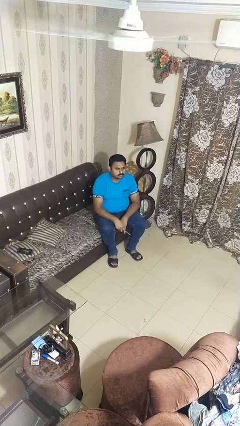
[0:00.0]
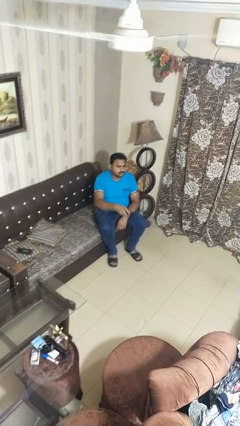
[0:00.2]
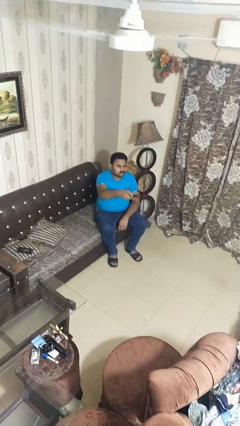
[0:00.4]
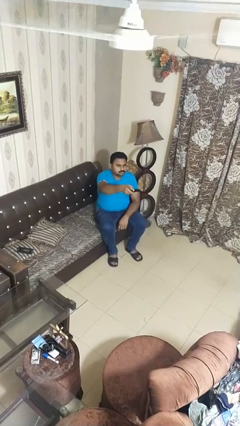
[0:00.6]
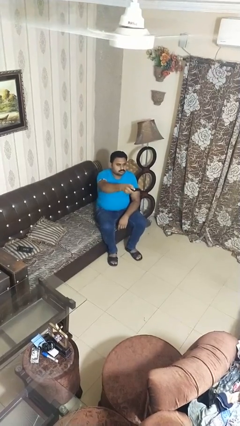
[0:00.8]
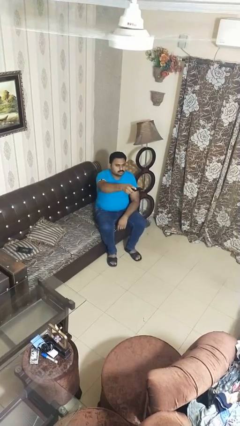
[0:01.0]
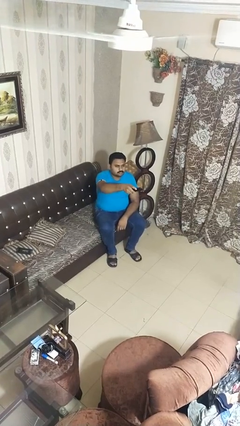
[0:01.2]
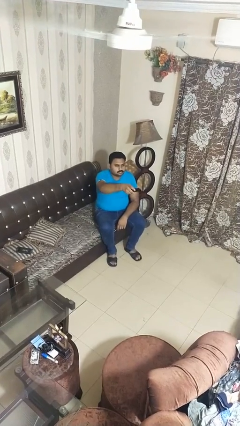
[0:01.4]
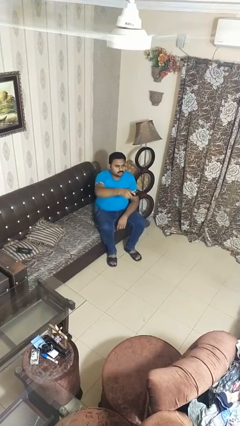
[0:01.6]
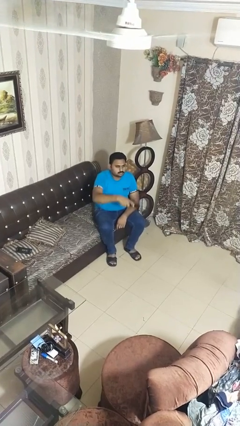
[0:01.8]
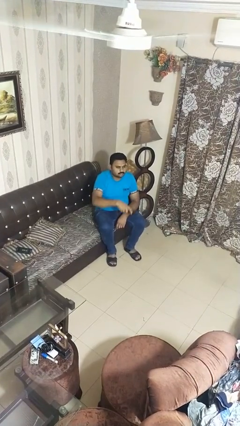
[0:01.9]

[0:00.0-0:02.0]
person uses television remote

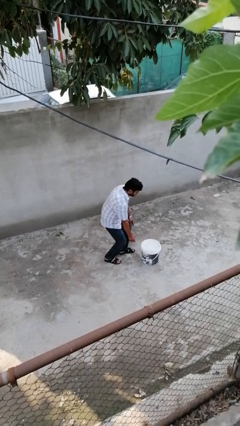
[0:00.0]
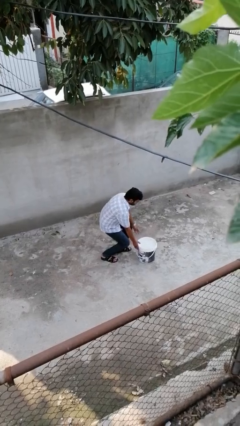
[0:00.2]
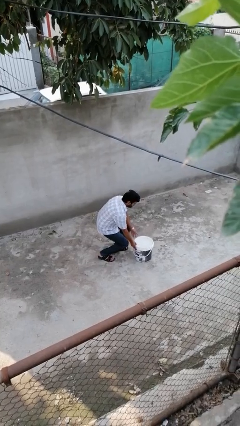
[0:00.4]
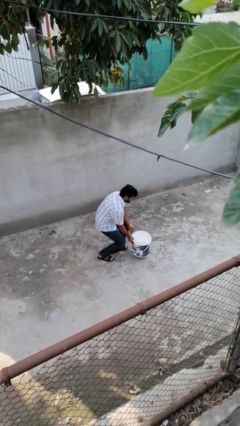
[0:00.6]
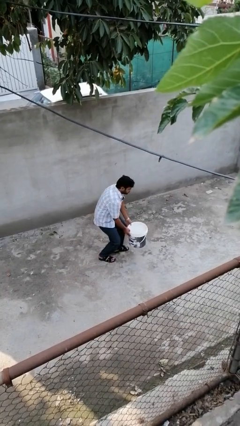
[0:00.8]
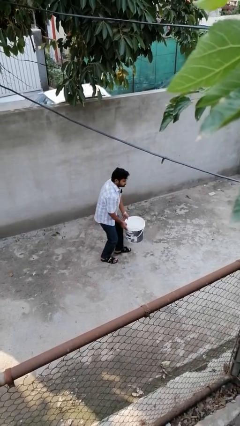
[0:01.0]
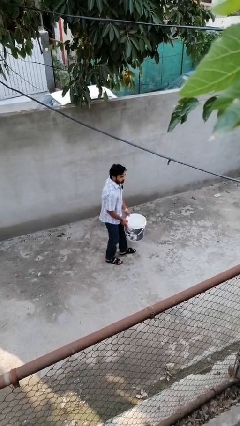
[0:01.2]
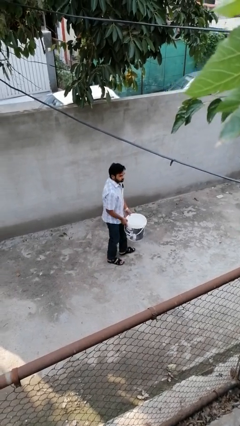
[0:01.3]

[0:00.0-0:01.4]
person picks up object from floor

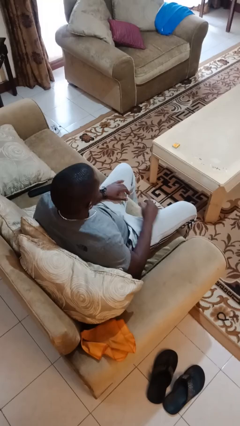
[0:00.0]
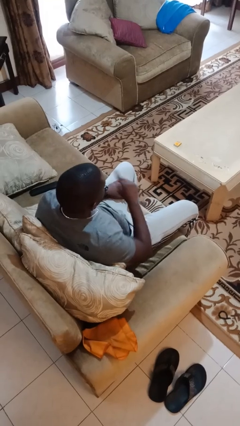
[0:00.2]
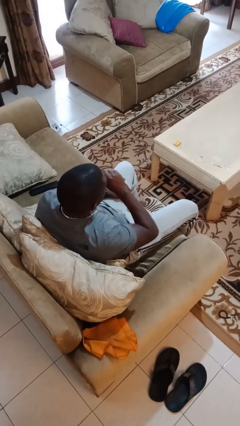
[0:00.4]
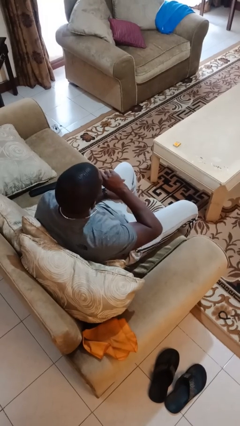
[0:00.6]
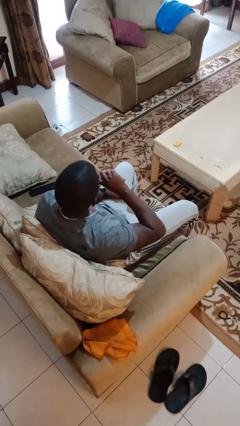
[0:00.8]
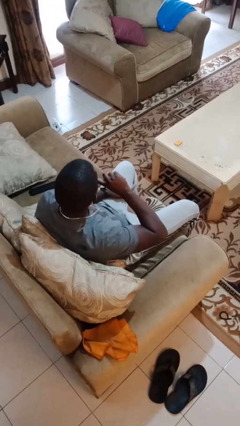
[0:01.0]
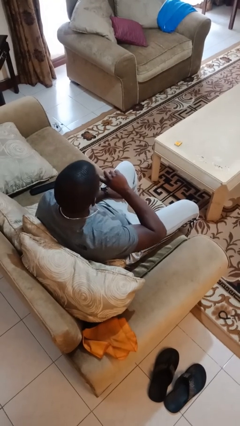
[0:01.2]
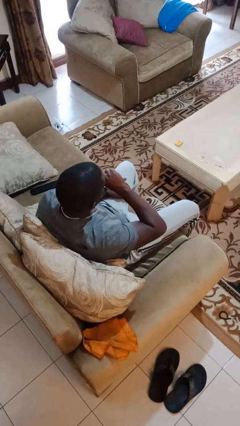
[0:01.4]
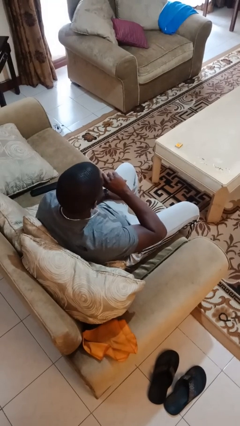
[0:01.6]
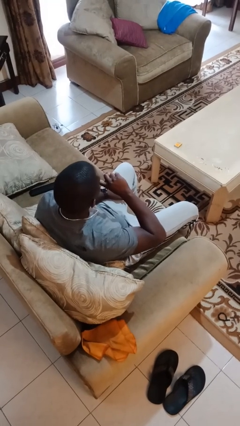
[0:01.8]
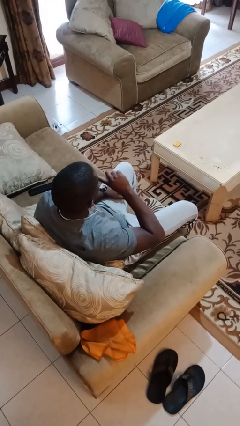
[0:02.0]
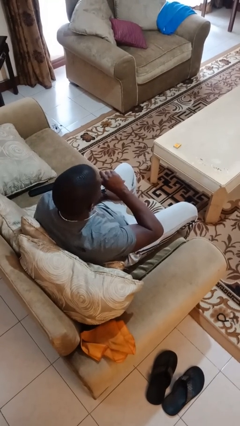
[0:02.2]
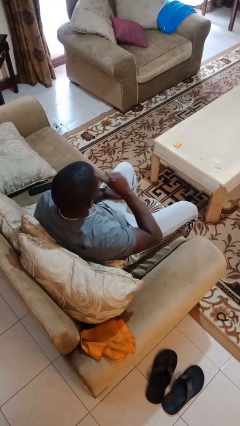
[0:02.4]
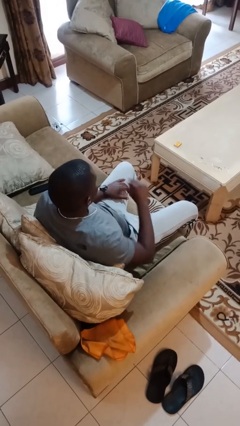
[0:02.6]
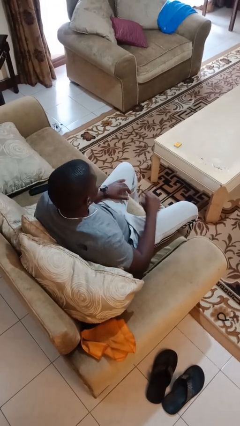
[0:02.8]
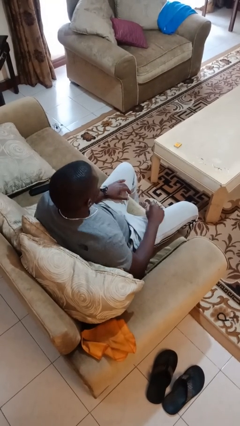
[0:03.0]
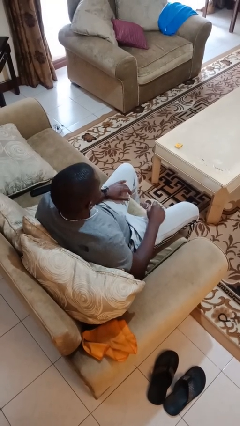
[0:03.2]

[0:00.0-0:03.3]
person licks fingers

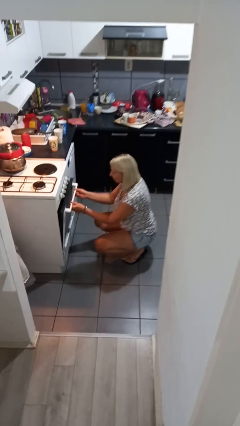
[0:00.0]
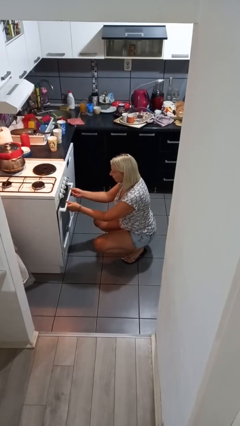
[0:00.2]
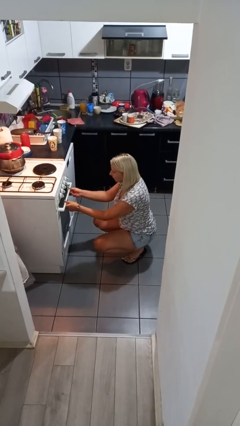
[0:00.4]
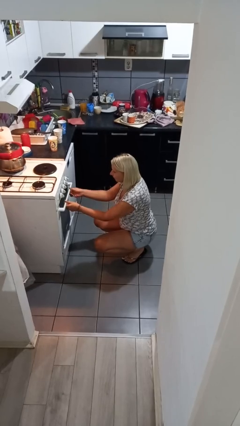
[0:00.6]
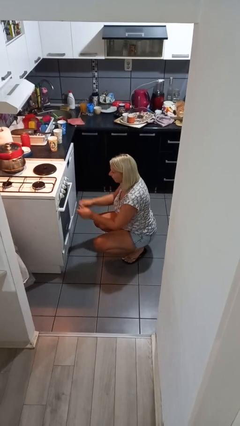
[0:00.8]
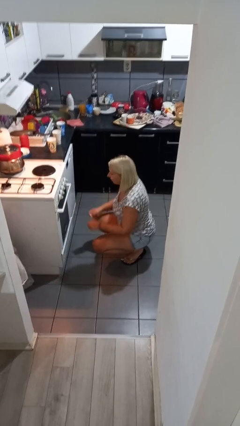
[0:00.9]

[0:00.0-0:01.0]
person closes oven door

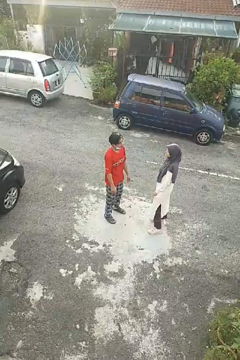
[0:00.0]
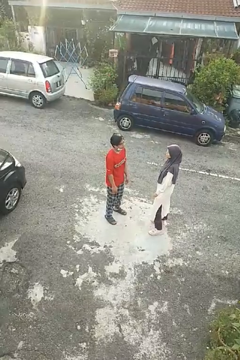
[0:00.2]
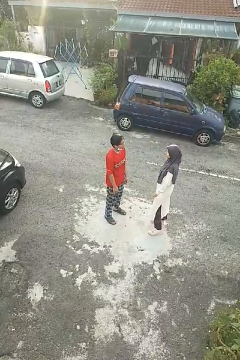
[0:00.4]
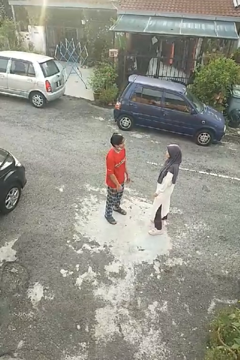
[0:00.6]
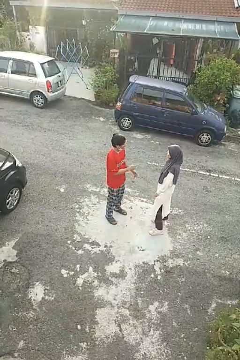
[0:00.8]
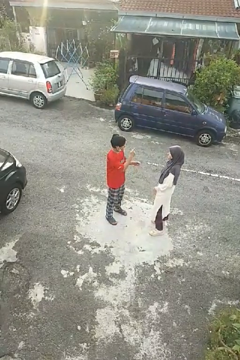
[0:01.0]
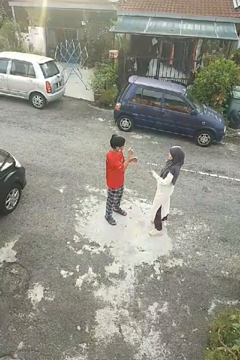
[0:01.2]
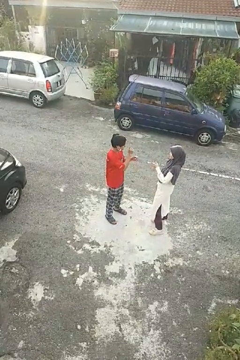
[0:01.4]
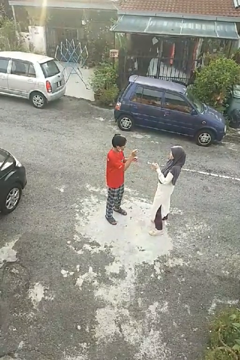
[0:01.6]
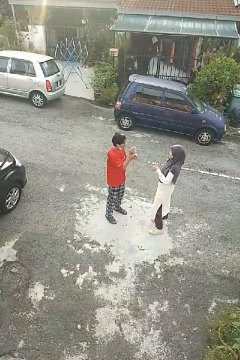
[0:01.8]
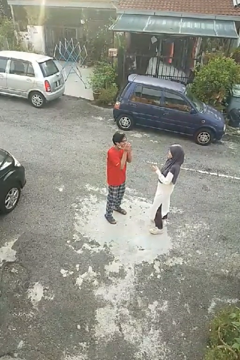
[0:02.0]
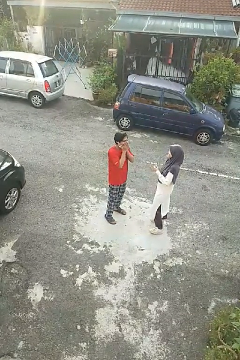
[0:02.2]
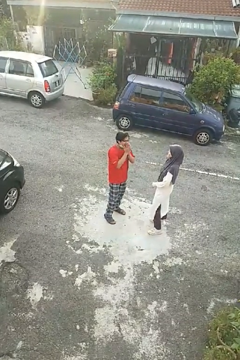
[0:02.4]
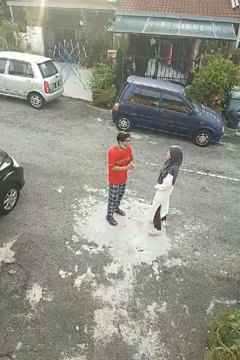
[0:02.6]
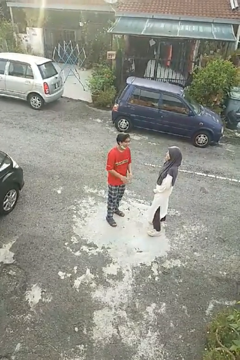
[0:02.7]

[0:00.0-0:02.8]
person laughs with person

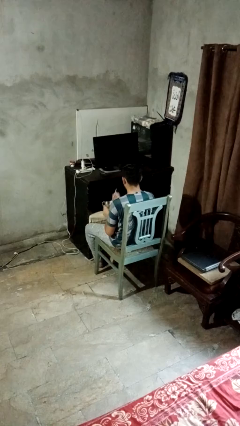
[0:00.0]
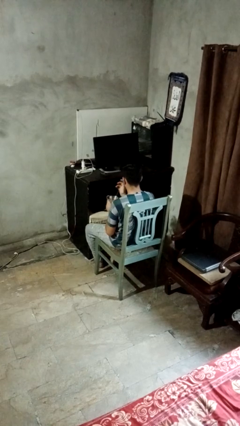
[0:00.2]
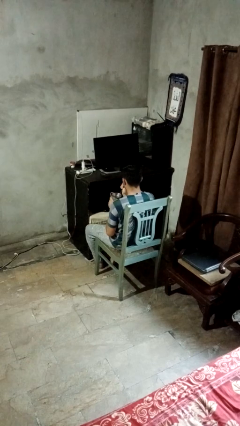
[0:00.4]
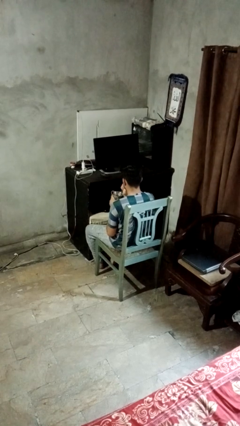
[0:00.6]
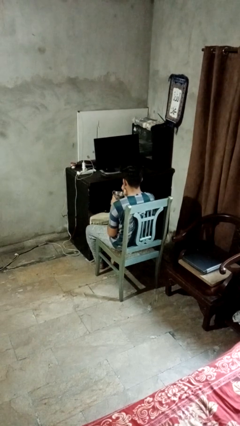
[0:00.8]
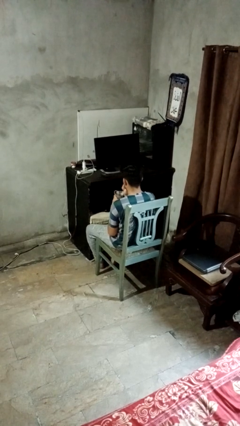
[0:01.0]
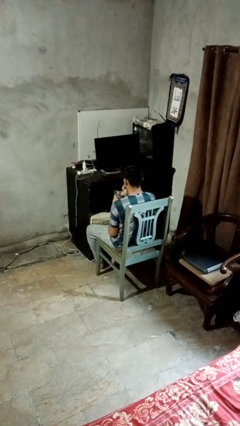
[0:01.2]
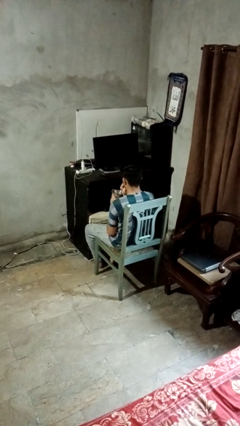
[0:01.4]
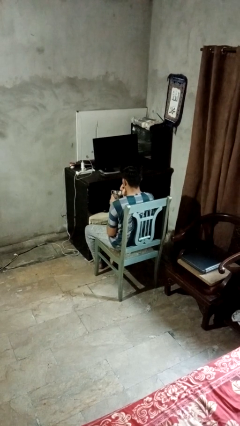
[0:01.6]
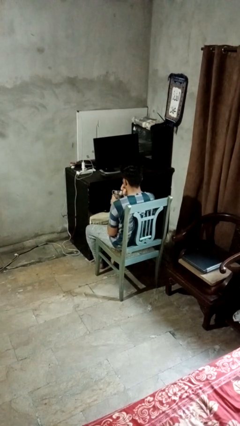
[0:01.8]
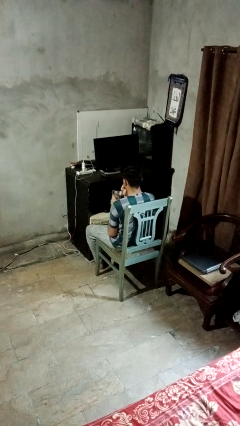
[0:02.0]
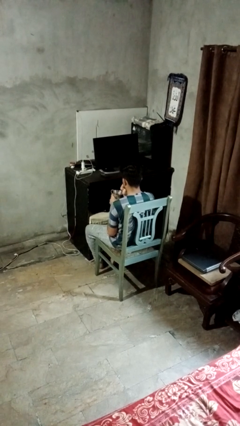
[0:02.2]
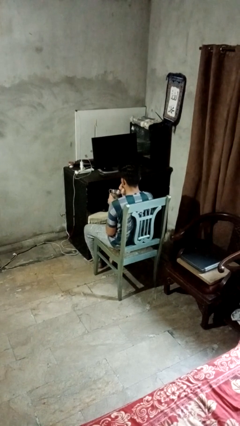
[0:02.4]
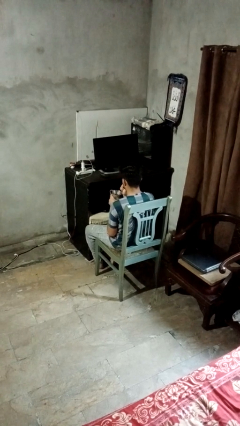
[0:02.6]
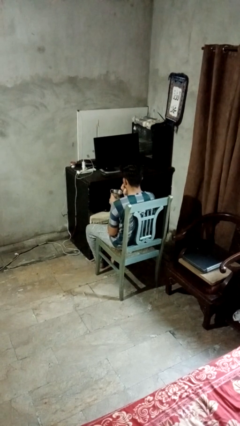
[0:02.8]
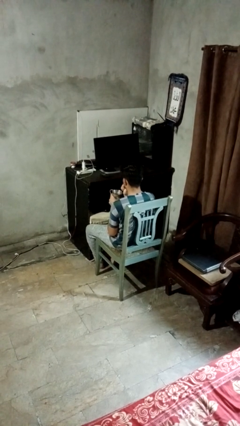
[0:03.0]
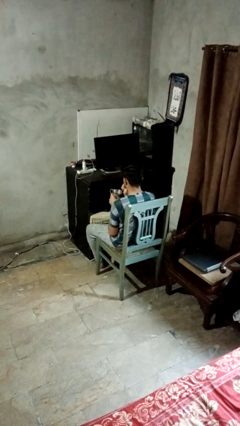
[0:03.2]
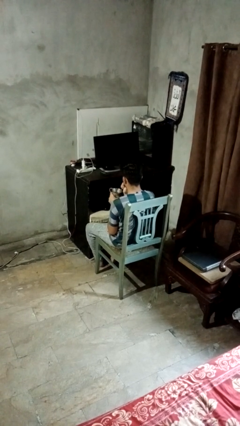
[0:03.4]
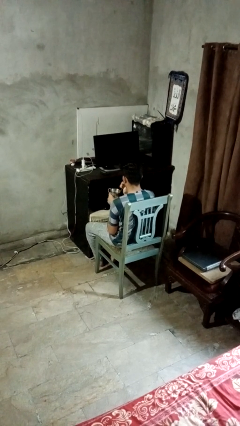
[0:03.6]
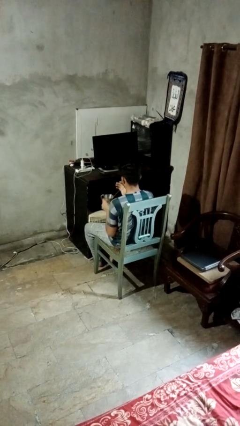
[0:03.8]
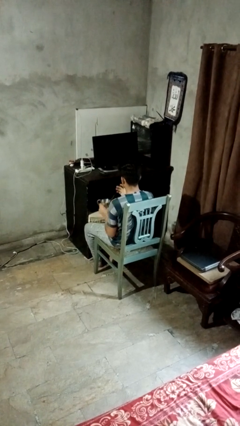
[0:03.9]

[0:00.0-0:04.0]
person drinks from straw

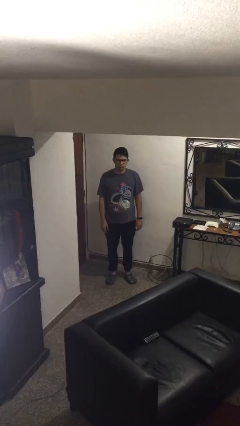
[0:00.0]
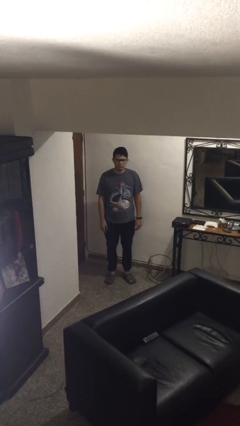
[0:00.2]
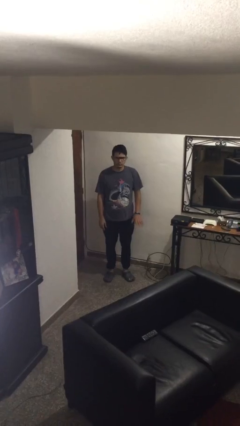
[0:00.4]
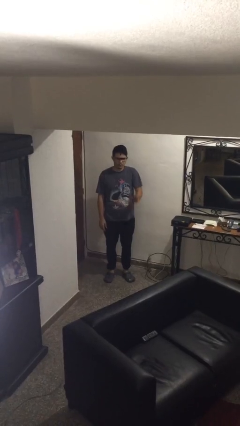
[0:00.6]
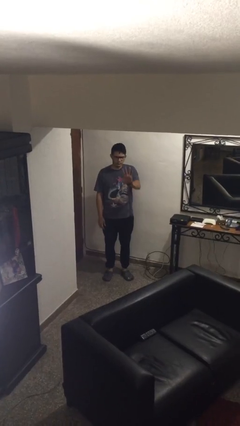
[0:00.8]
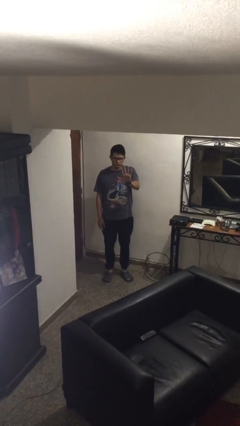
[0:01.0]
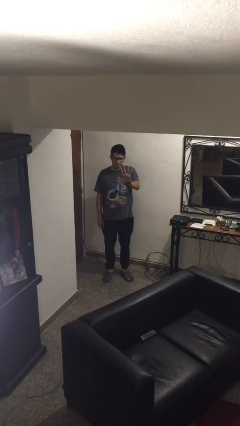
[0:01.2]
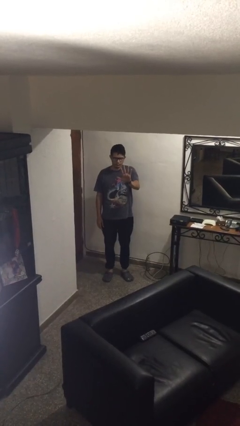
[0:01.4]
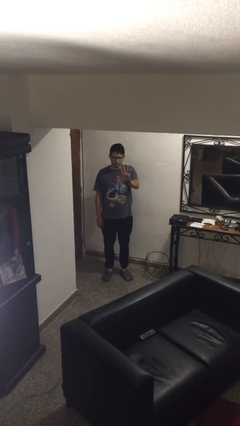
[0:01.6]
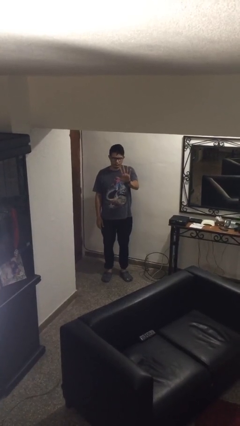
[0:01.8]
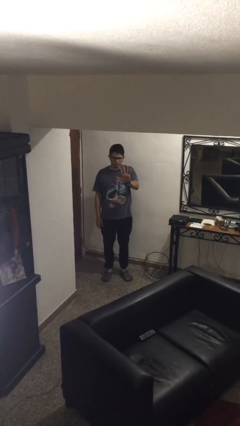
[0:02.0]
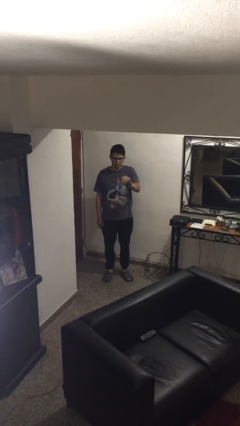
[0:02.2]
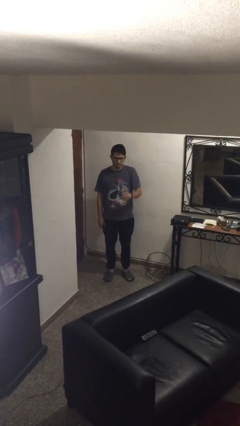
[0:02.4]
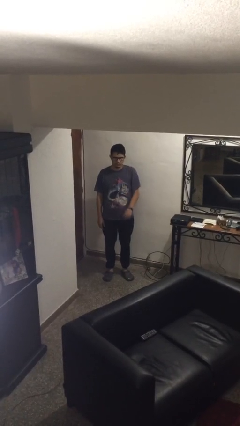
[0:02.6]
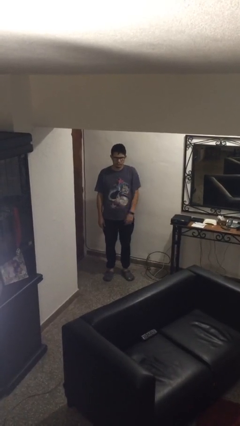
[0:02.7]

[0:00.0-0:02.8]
person gestures number five

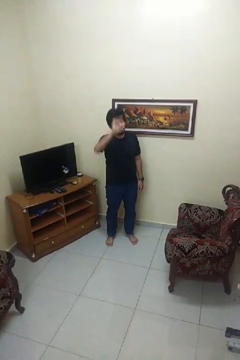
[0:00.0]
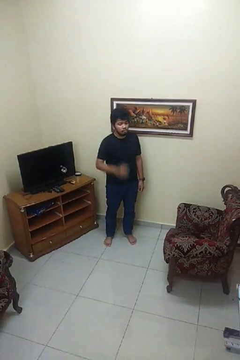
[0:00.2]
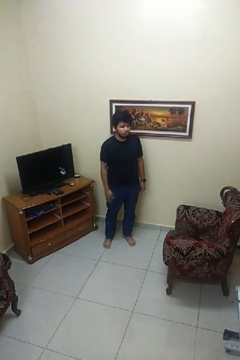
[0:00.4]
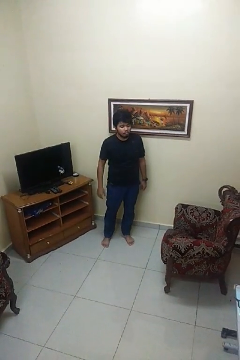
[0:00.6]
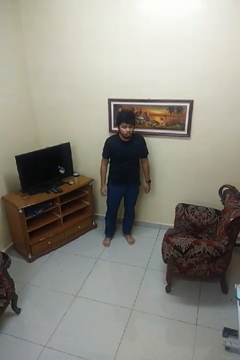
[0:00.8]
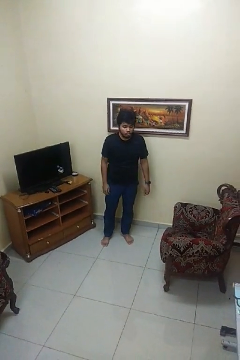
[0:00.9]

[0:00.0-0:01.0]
person gestures lower hand
